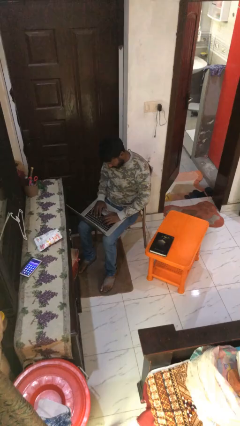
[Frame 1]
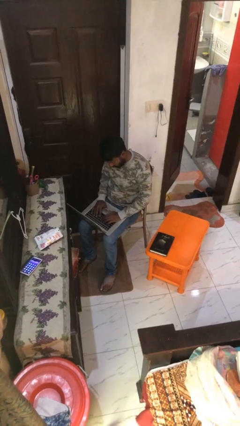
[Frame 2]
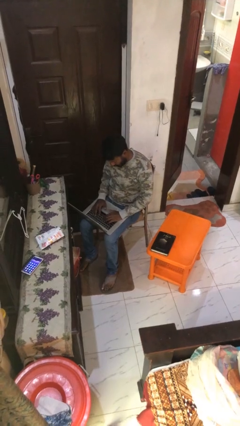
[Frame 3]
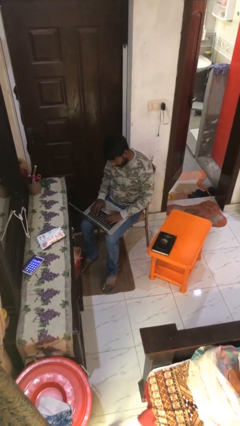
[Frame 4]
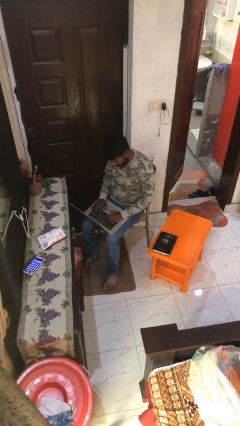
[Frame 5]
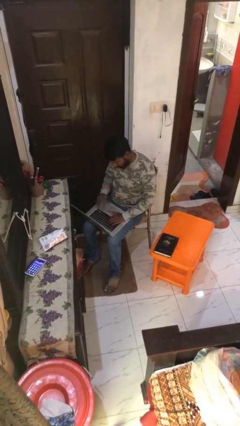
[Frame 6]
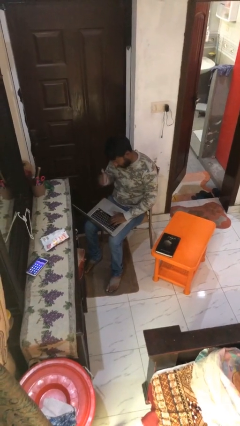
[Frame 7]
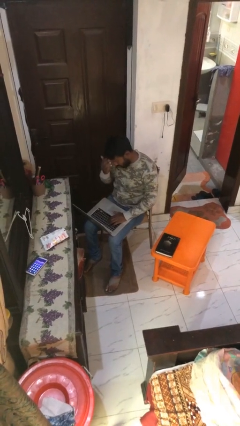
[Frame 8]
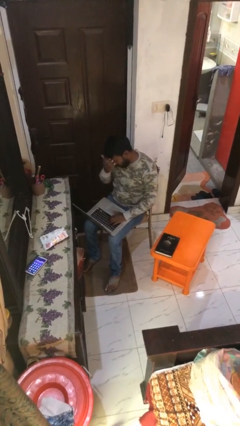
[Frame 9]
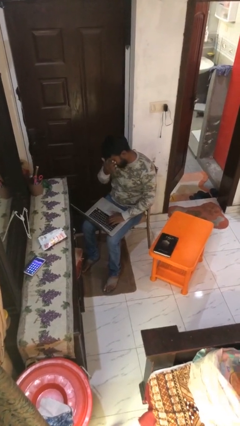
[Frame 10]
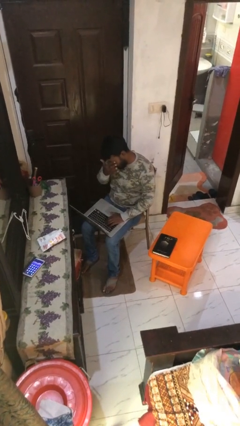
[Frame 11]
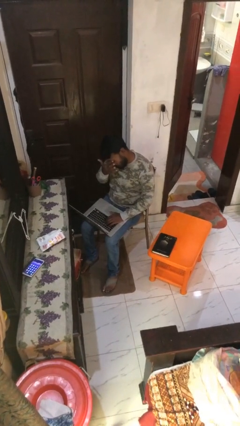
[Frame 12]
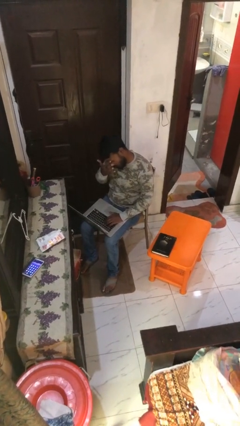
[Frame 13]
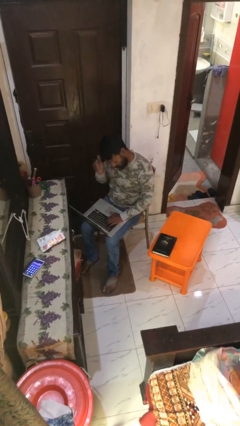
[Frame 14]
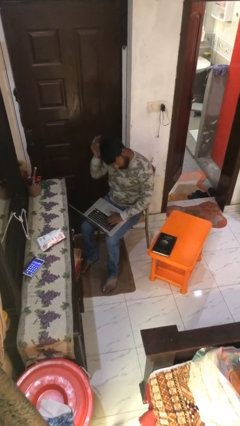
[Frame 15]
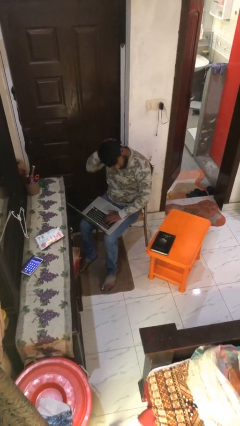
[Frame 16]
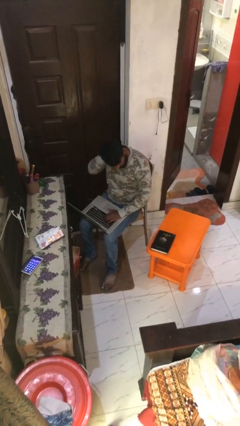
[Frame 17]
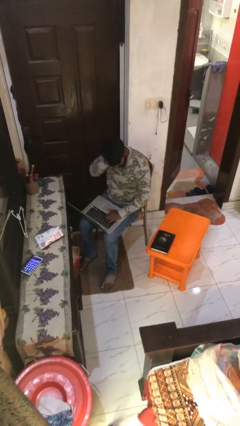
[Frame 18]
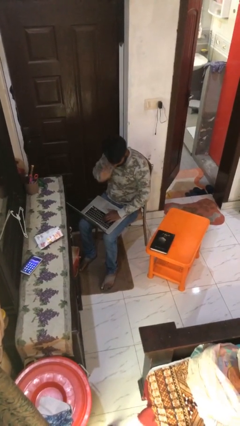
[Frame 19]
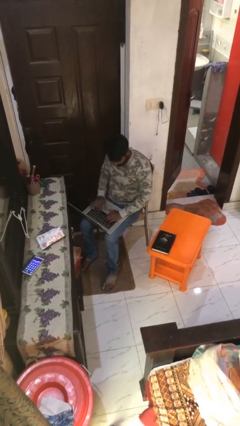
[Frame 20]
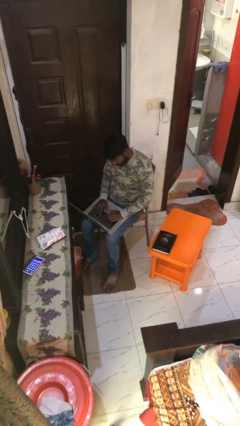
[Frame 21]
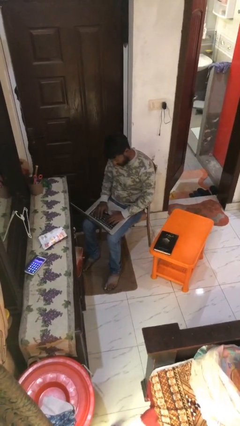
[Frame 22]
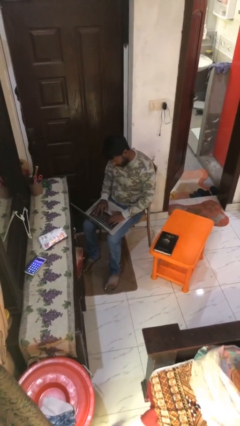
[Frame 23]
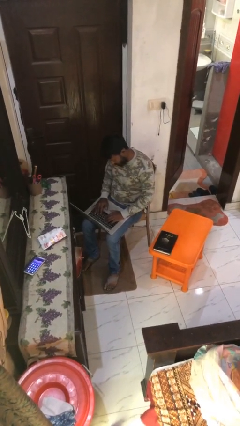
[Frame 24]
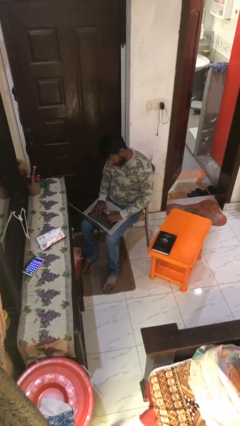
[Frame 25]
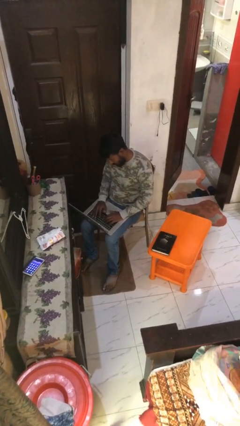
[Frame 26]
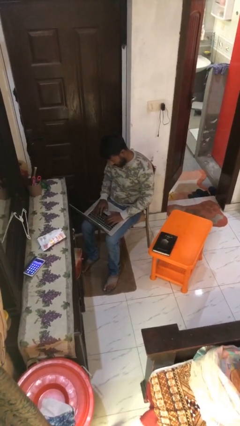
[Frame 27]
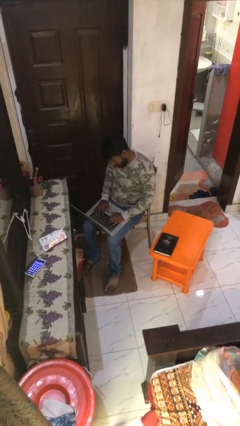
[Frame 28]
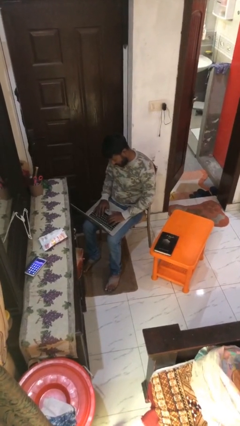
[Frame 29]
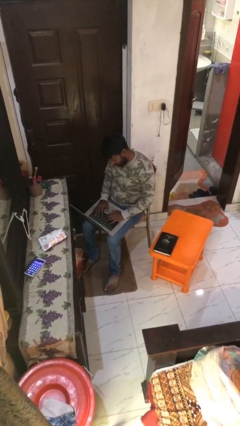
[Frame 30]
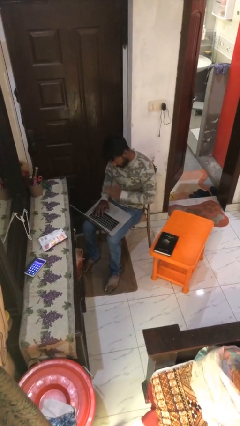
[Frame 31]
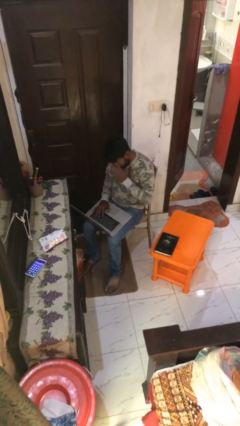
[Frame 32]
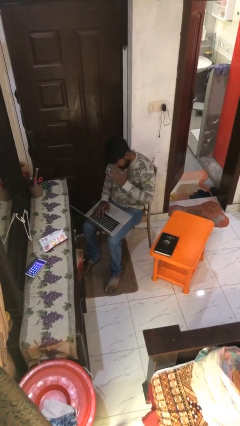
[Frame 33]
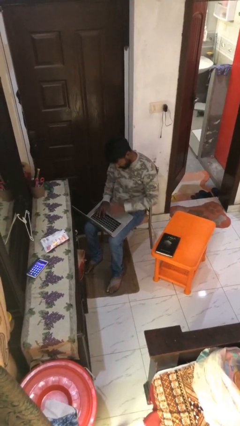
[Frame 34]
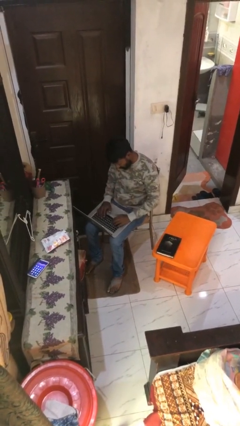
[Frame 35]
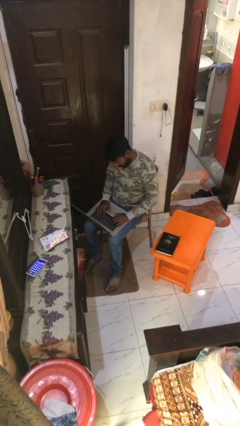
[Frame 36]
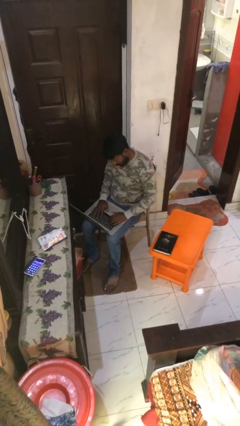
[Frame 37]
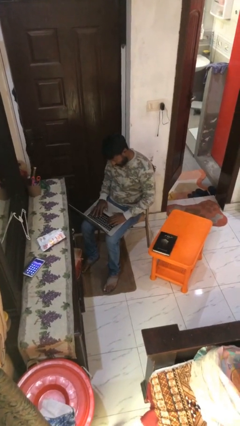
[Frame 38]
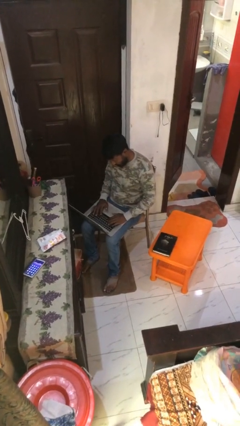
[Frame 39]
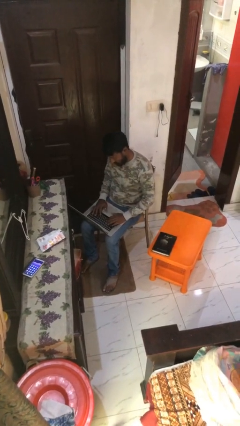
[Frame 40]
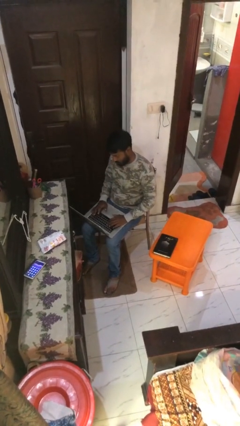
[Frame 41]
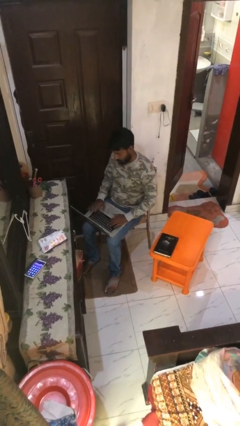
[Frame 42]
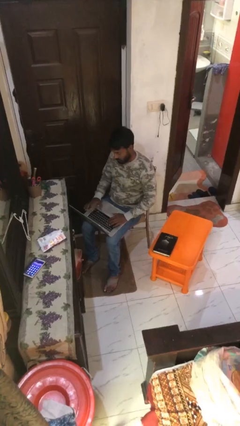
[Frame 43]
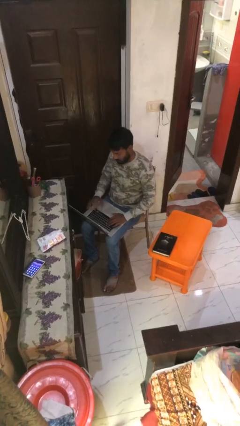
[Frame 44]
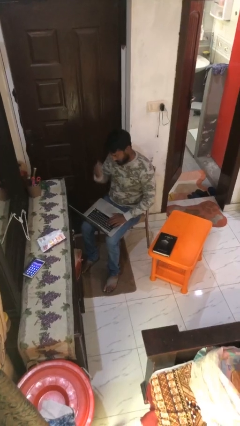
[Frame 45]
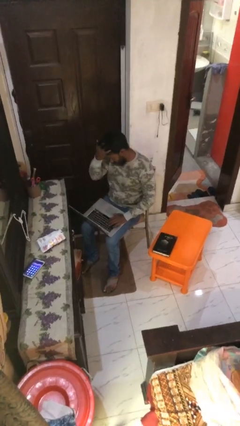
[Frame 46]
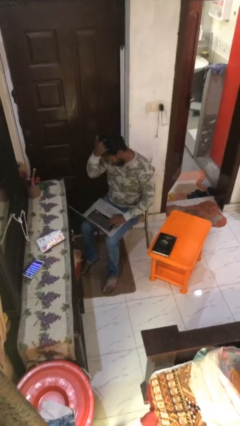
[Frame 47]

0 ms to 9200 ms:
person interacts with laptop

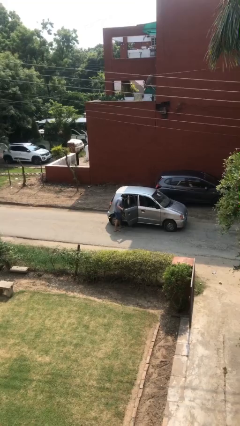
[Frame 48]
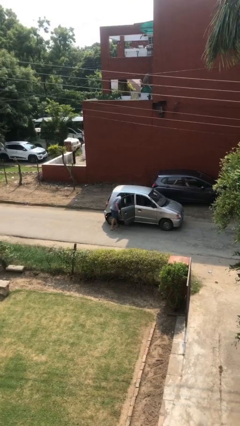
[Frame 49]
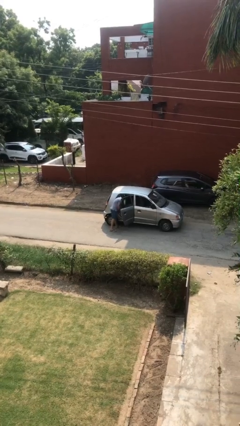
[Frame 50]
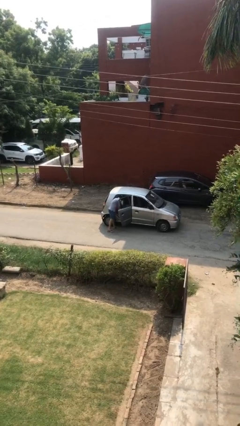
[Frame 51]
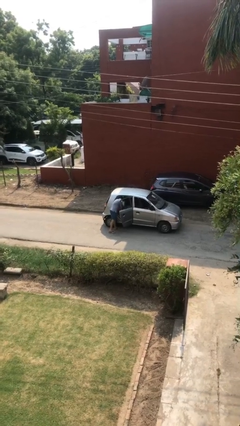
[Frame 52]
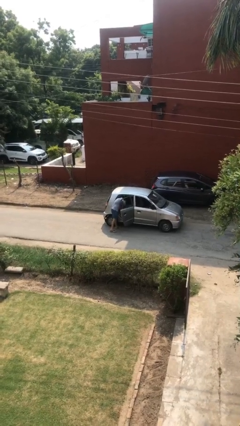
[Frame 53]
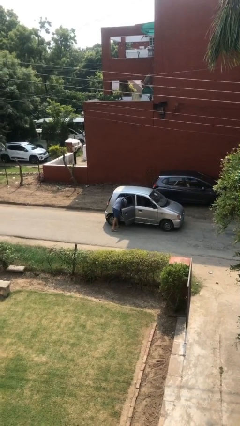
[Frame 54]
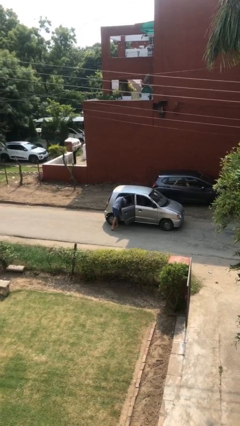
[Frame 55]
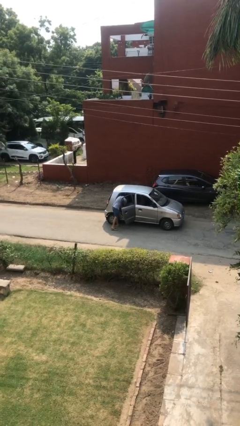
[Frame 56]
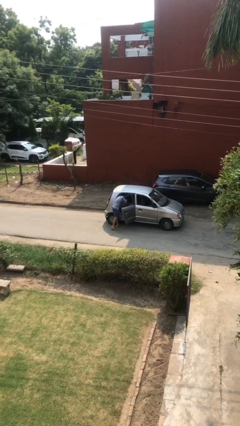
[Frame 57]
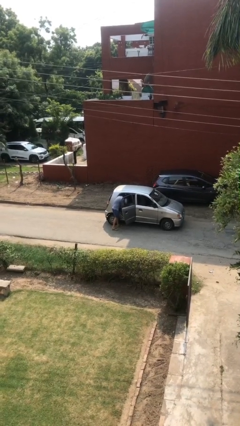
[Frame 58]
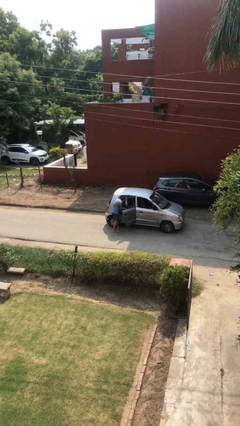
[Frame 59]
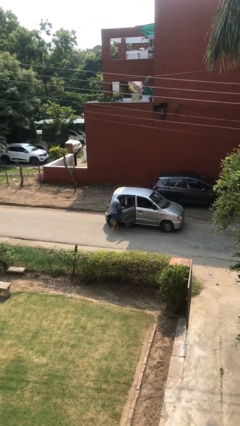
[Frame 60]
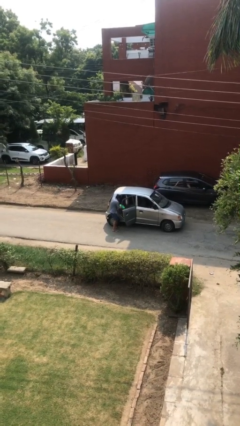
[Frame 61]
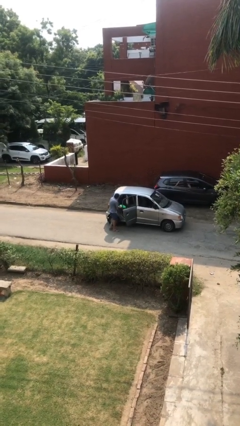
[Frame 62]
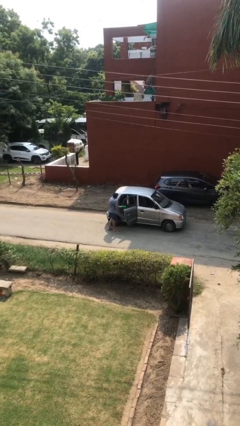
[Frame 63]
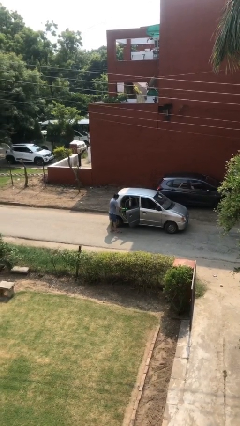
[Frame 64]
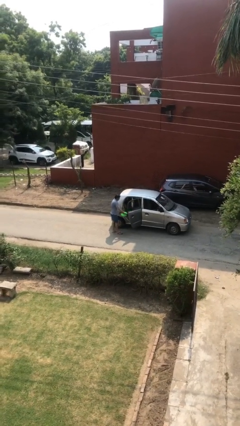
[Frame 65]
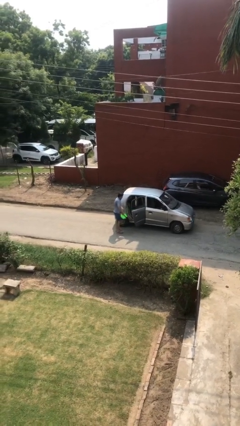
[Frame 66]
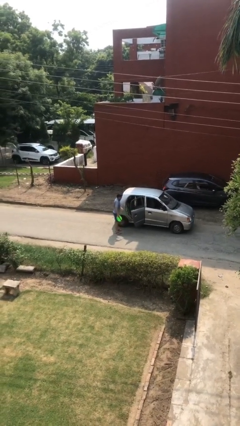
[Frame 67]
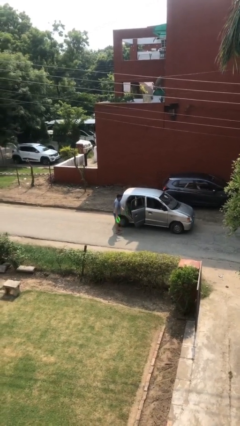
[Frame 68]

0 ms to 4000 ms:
person unloads car

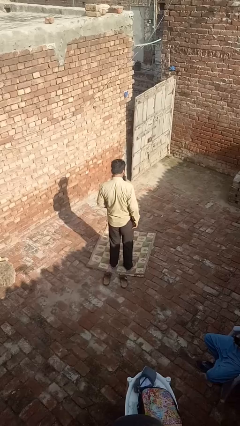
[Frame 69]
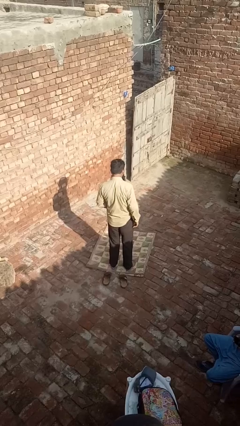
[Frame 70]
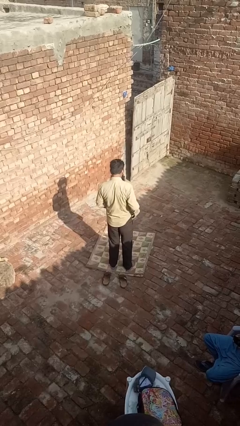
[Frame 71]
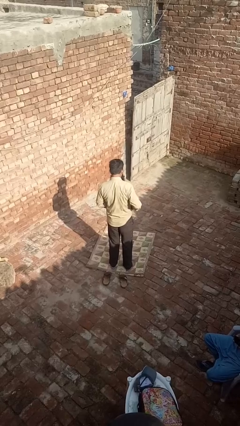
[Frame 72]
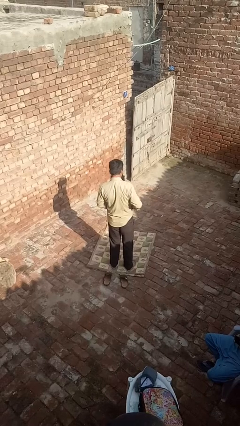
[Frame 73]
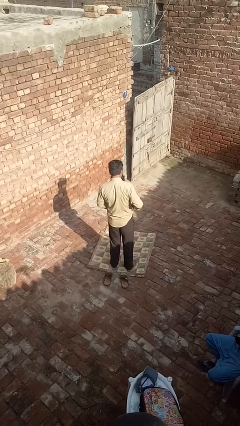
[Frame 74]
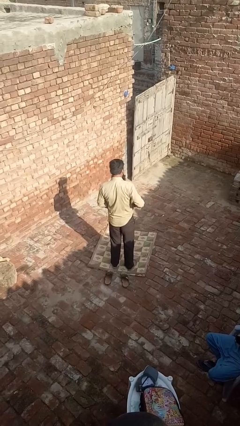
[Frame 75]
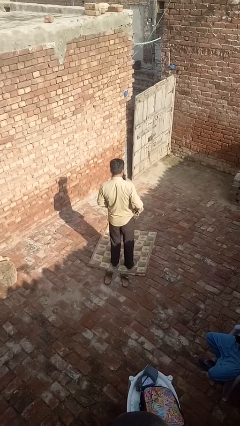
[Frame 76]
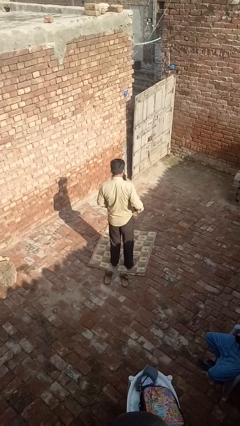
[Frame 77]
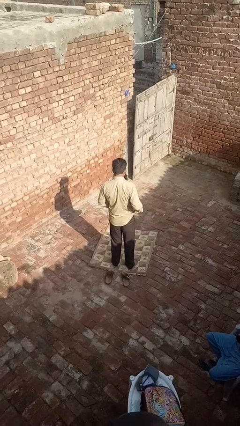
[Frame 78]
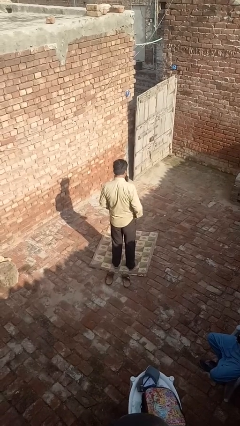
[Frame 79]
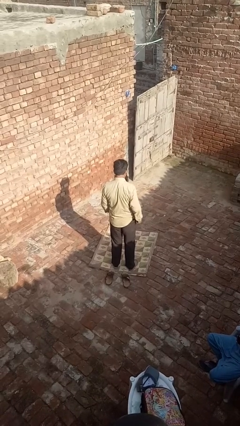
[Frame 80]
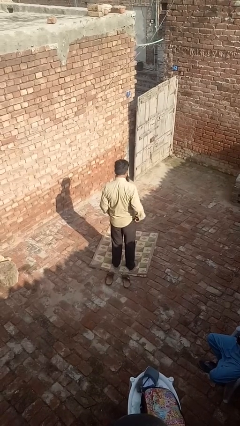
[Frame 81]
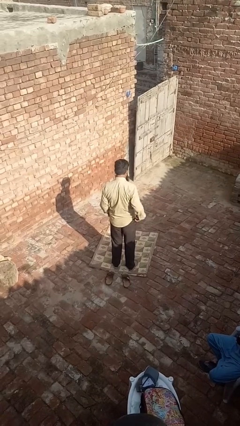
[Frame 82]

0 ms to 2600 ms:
person untucks shirt

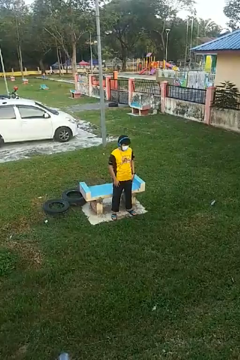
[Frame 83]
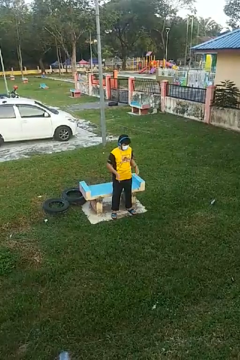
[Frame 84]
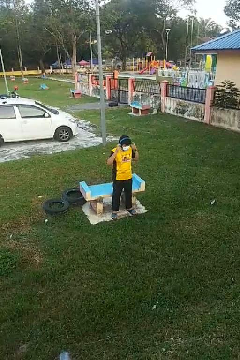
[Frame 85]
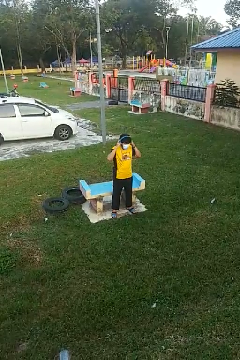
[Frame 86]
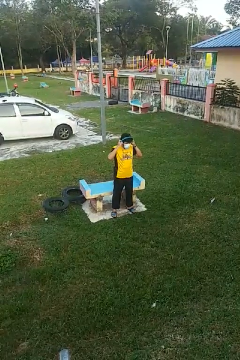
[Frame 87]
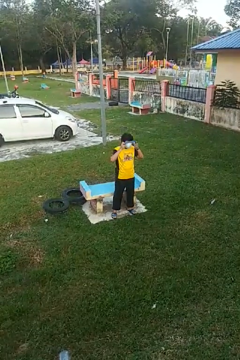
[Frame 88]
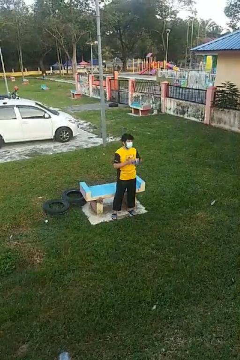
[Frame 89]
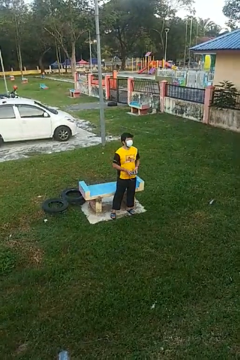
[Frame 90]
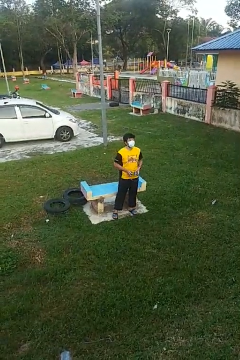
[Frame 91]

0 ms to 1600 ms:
person takes off headphones
